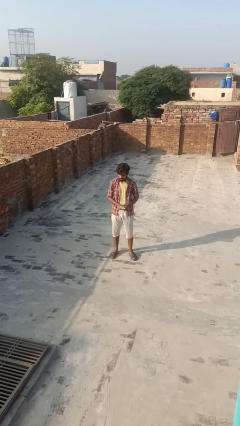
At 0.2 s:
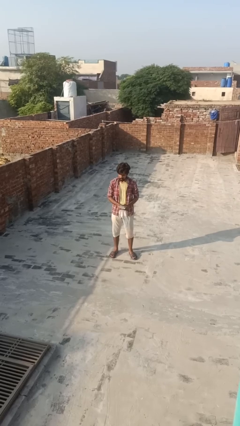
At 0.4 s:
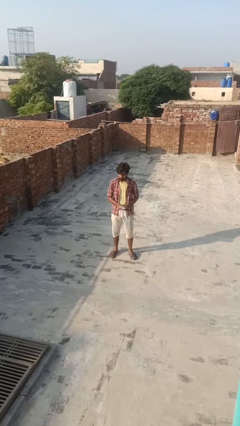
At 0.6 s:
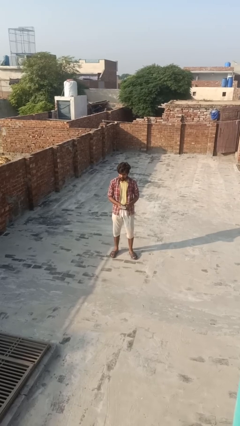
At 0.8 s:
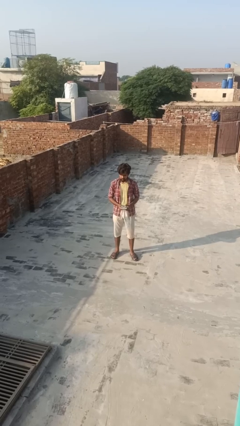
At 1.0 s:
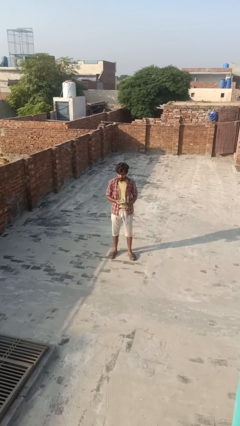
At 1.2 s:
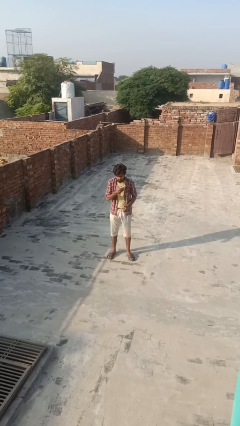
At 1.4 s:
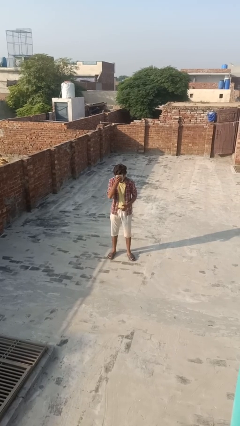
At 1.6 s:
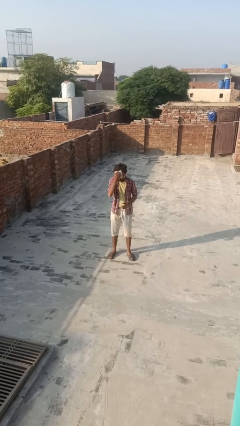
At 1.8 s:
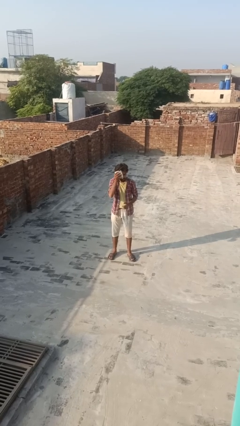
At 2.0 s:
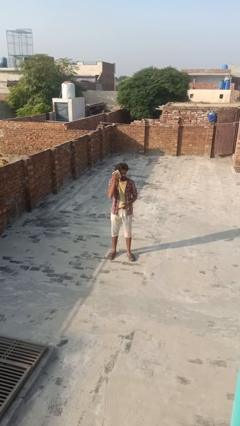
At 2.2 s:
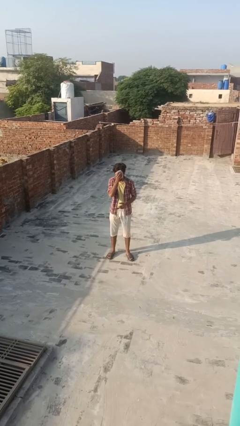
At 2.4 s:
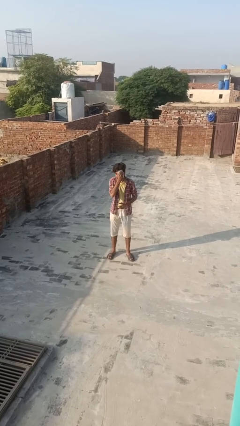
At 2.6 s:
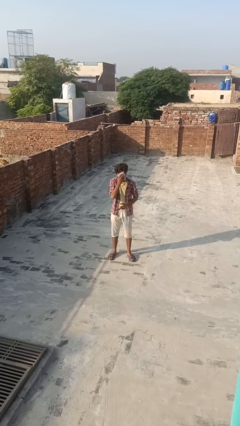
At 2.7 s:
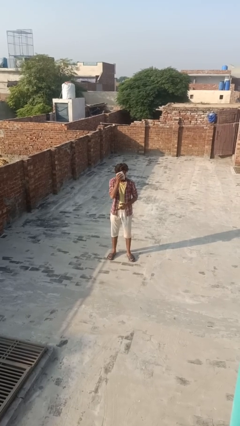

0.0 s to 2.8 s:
person wipes mouth with napkin

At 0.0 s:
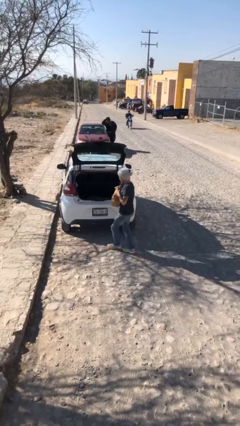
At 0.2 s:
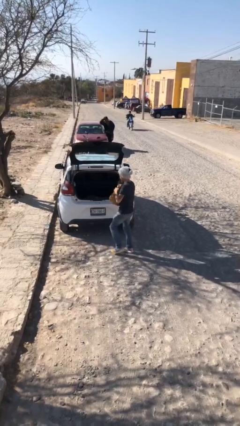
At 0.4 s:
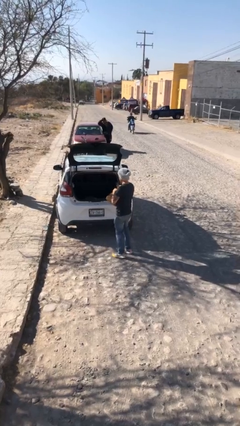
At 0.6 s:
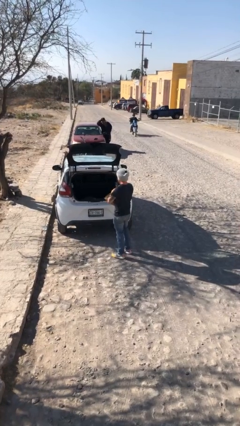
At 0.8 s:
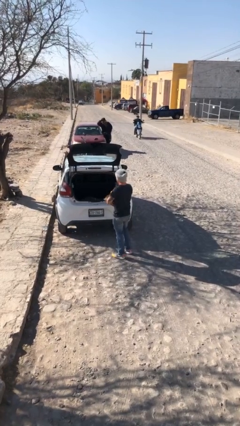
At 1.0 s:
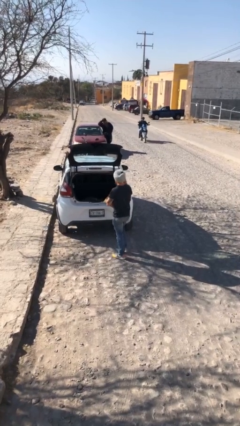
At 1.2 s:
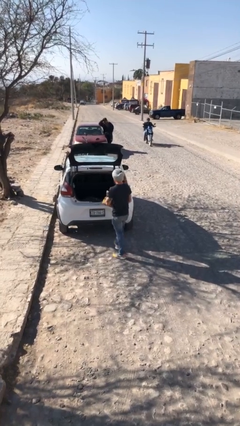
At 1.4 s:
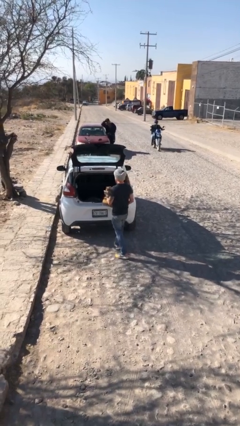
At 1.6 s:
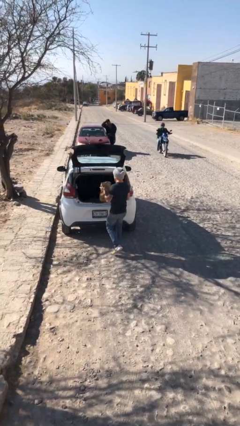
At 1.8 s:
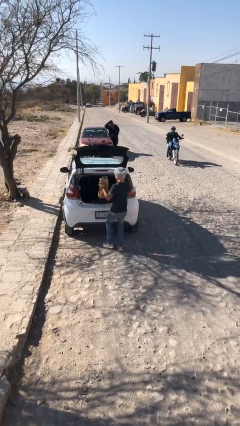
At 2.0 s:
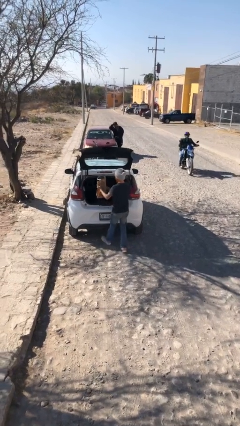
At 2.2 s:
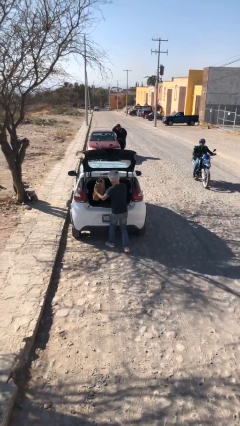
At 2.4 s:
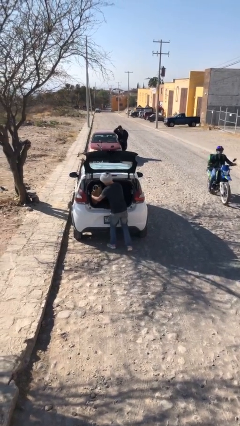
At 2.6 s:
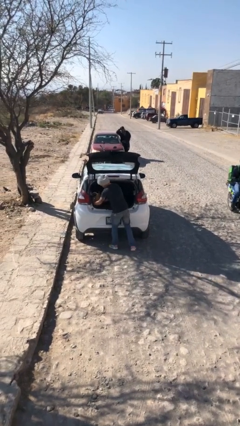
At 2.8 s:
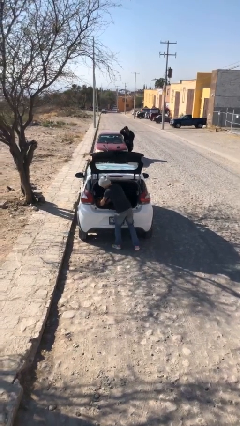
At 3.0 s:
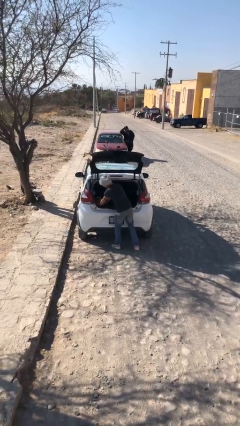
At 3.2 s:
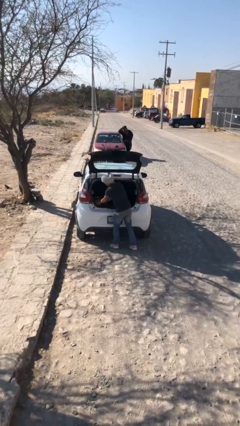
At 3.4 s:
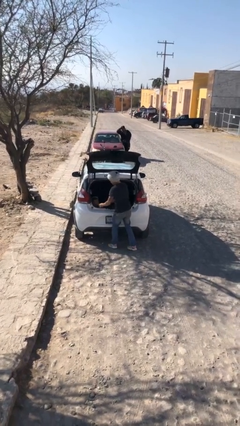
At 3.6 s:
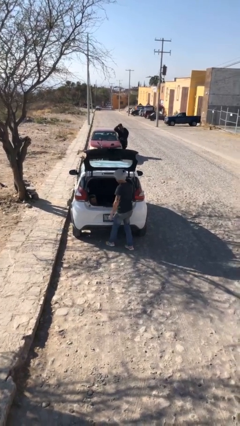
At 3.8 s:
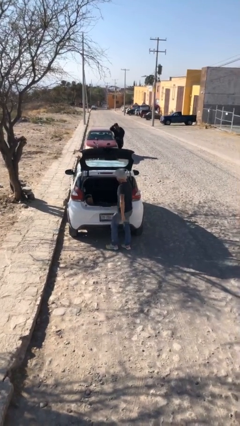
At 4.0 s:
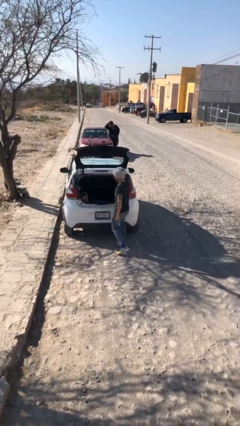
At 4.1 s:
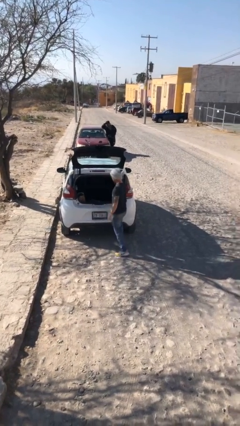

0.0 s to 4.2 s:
person loads car

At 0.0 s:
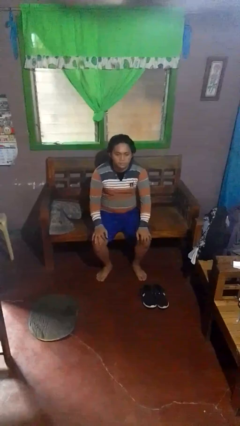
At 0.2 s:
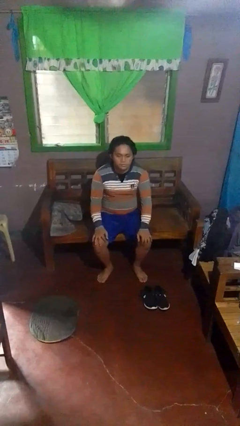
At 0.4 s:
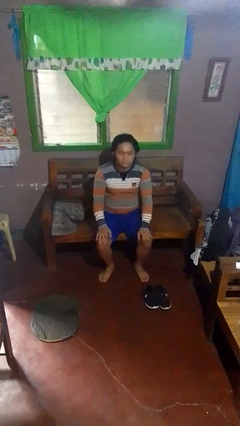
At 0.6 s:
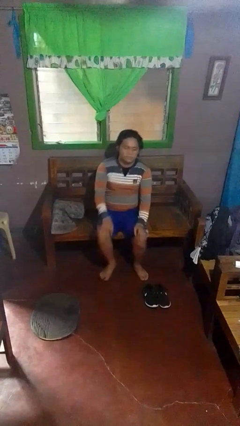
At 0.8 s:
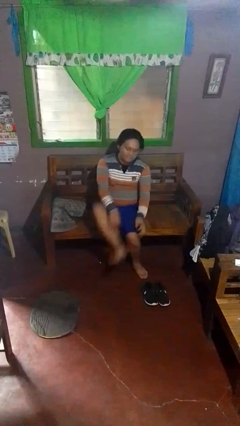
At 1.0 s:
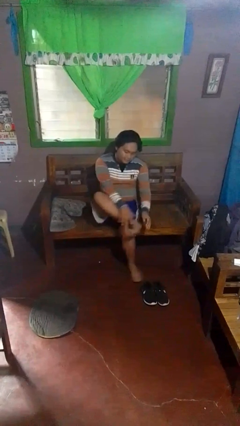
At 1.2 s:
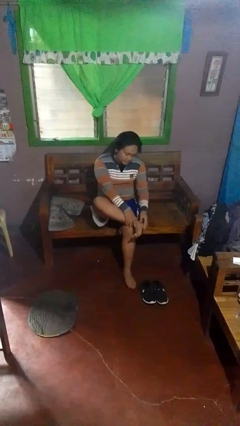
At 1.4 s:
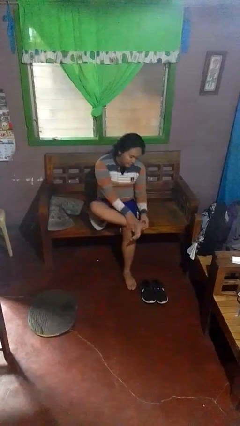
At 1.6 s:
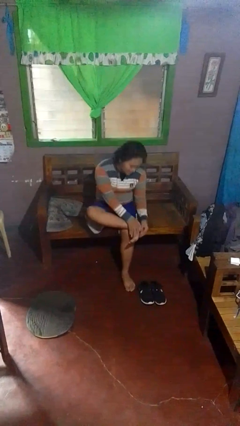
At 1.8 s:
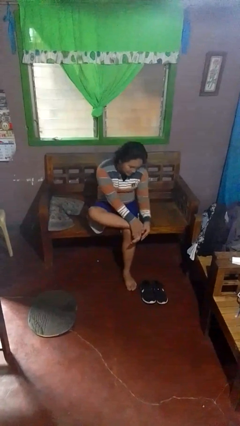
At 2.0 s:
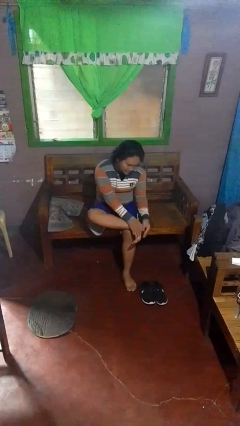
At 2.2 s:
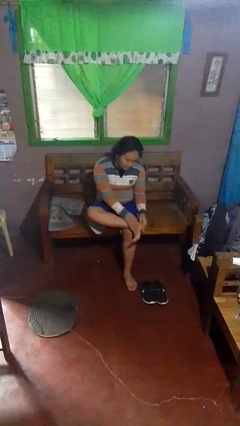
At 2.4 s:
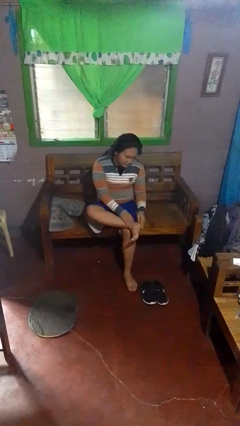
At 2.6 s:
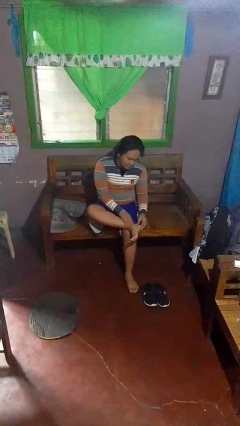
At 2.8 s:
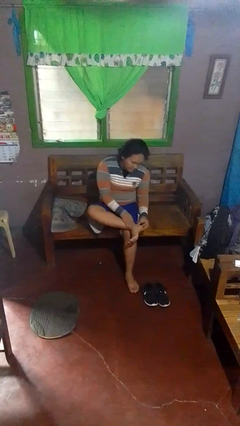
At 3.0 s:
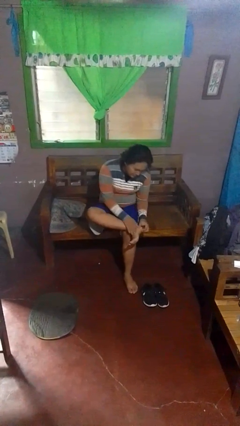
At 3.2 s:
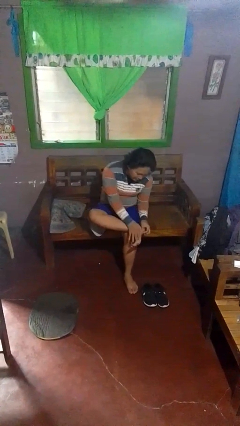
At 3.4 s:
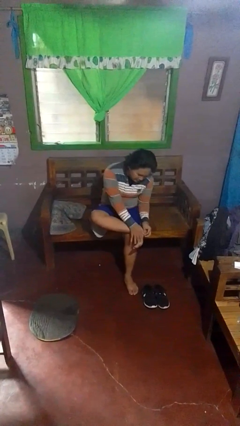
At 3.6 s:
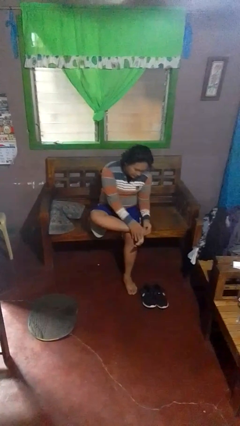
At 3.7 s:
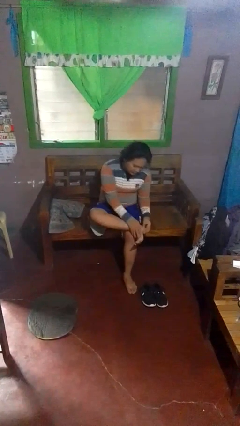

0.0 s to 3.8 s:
person rubs foot

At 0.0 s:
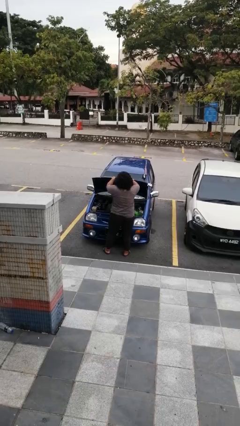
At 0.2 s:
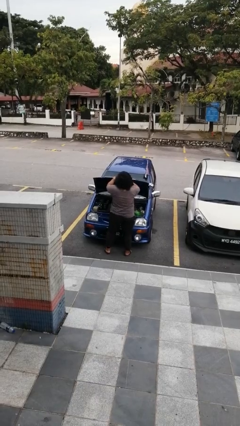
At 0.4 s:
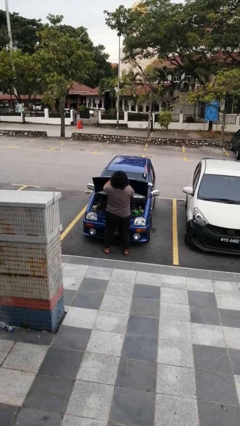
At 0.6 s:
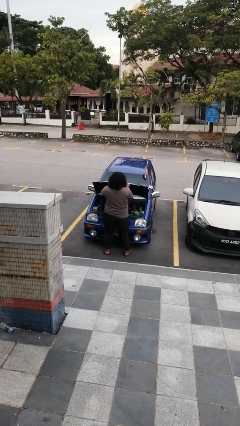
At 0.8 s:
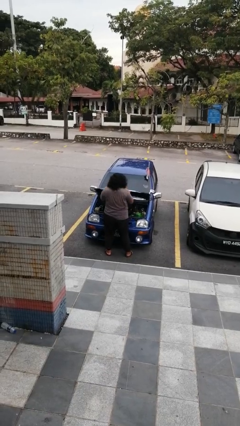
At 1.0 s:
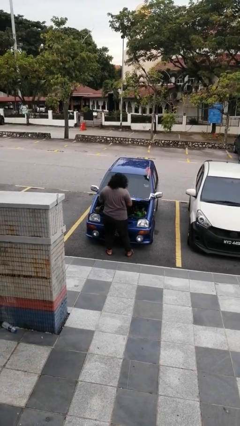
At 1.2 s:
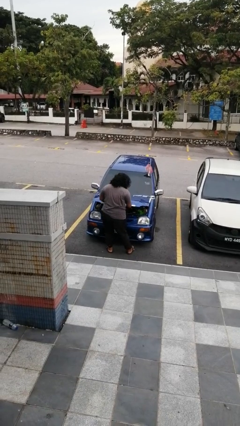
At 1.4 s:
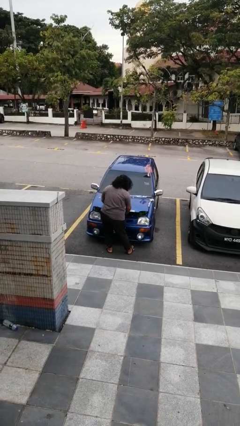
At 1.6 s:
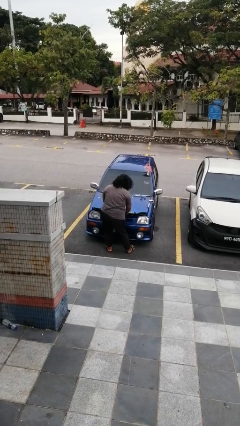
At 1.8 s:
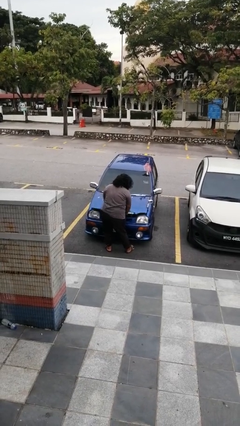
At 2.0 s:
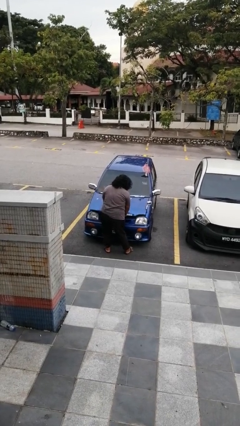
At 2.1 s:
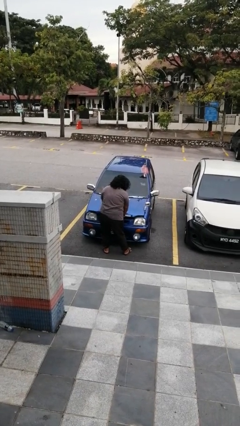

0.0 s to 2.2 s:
person closes car hood

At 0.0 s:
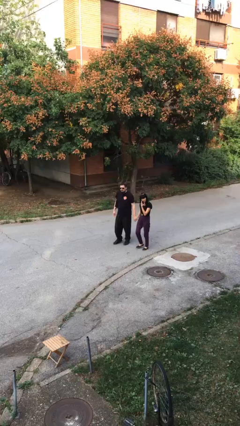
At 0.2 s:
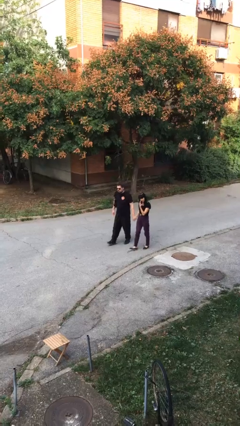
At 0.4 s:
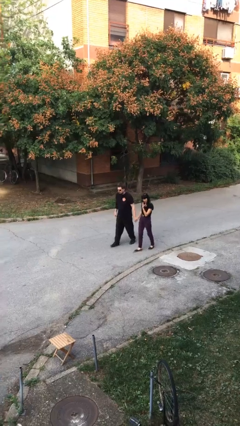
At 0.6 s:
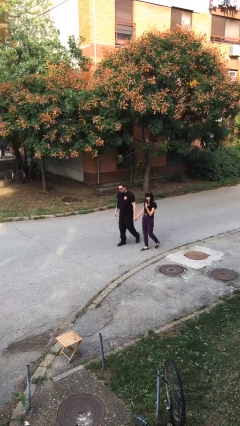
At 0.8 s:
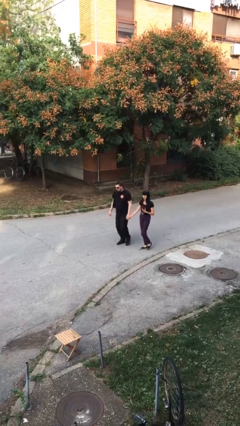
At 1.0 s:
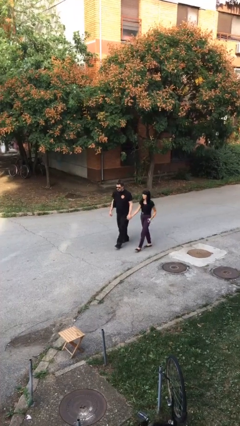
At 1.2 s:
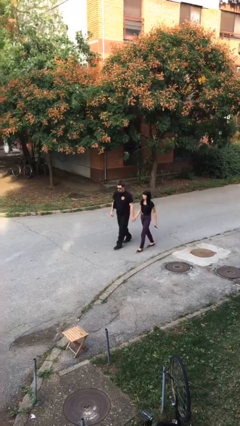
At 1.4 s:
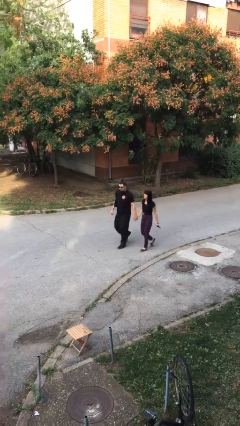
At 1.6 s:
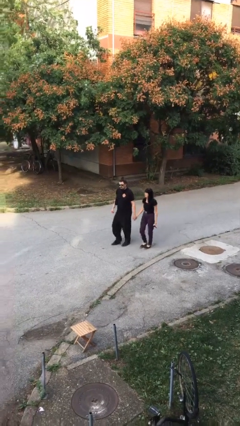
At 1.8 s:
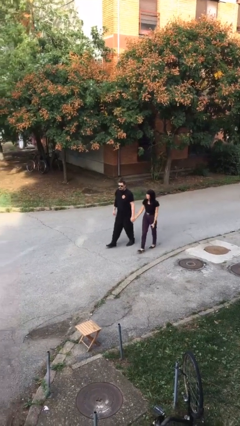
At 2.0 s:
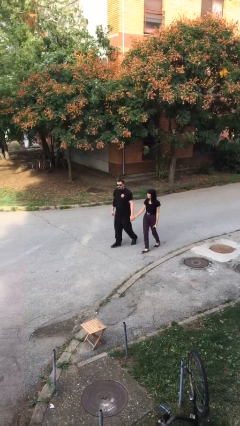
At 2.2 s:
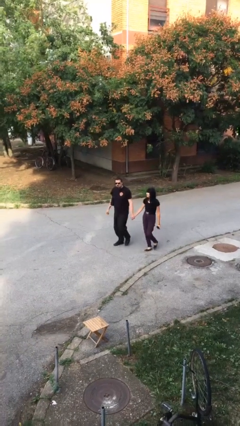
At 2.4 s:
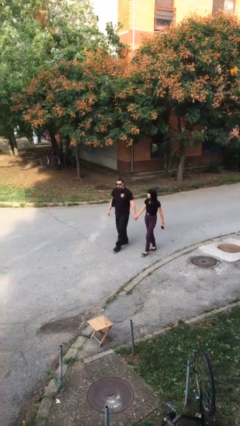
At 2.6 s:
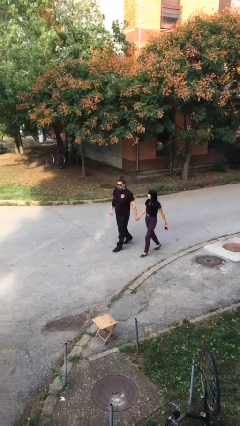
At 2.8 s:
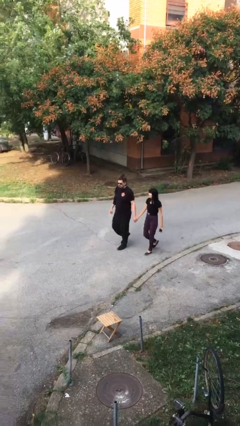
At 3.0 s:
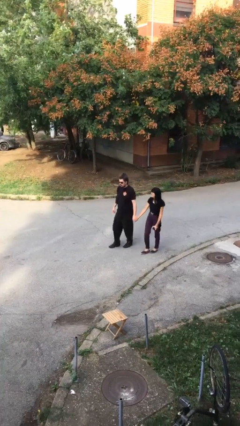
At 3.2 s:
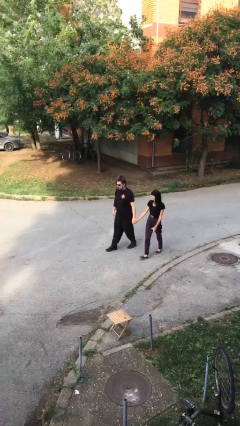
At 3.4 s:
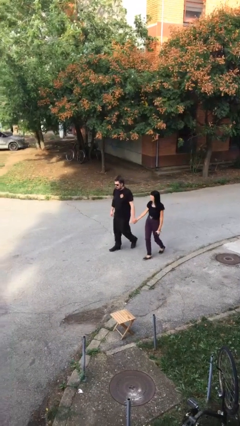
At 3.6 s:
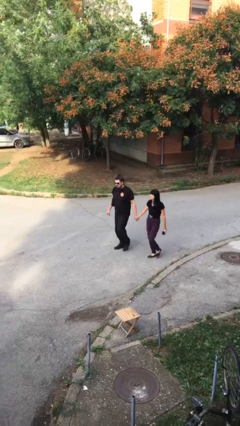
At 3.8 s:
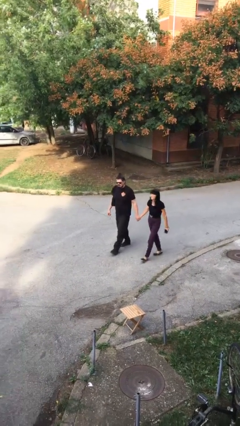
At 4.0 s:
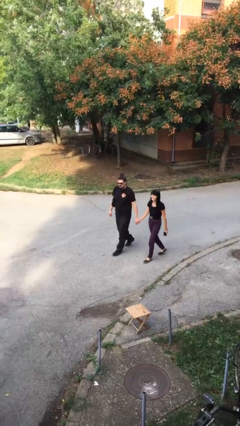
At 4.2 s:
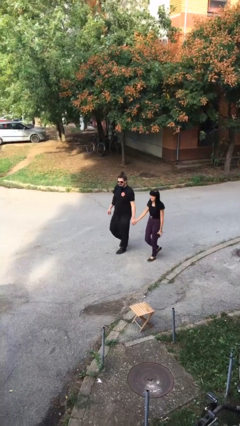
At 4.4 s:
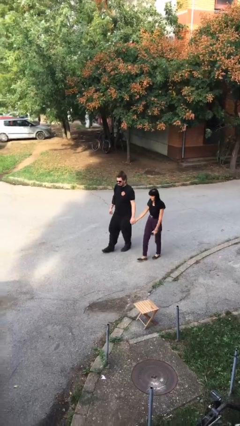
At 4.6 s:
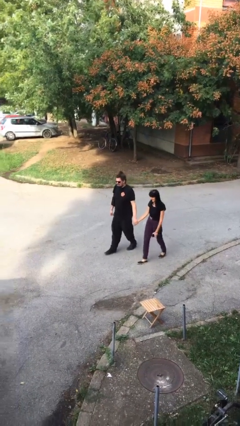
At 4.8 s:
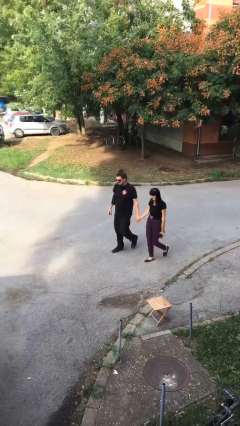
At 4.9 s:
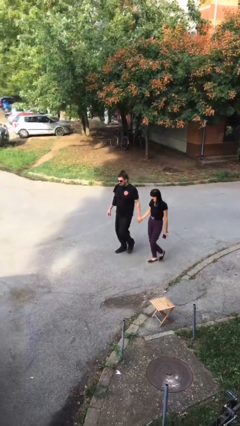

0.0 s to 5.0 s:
person holds hand
